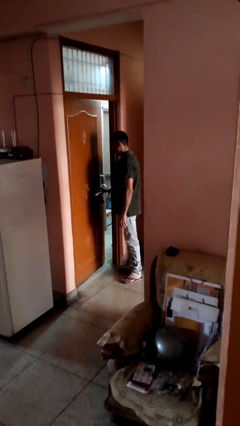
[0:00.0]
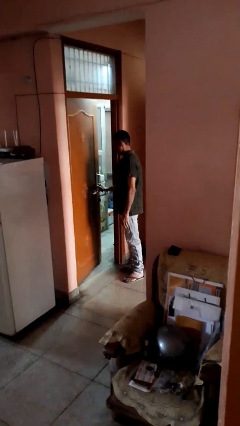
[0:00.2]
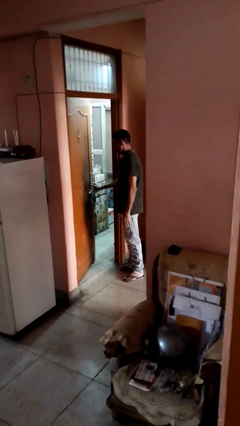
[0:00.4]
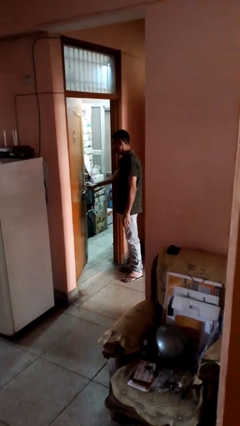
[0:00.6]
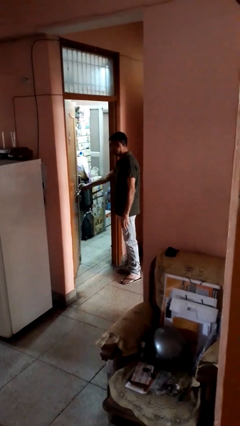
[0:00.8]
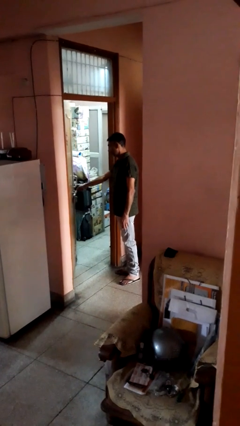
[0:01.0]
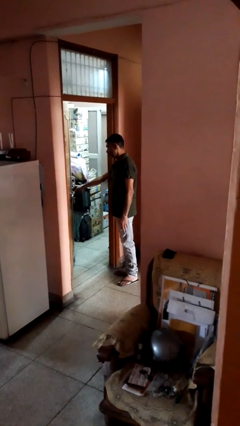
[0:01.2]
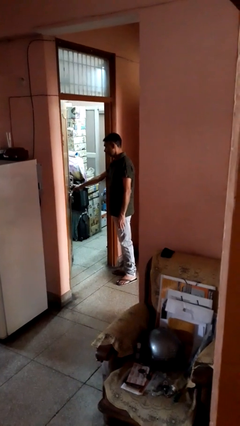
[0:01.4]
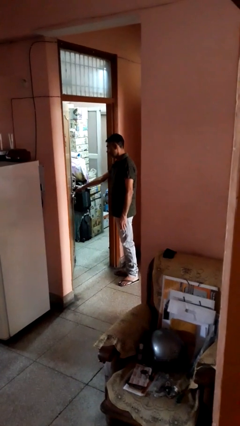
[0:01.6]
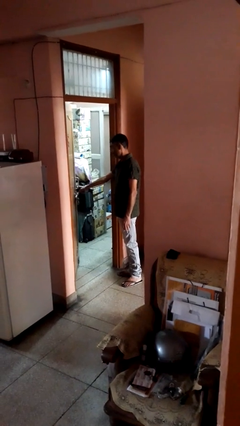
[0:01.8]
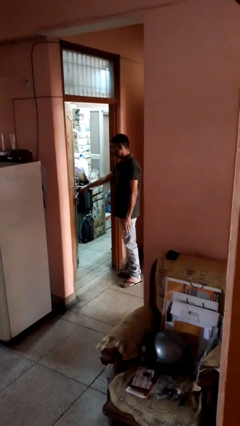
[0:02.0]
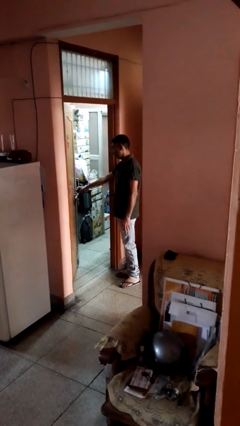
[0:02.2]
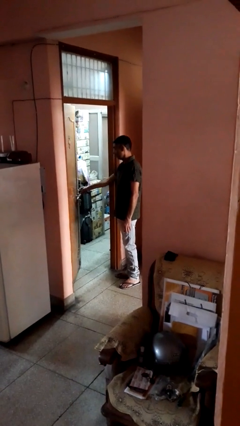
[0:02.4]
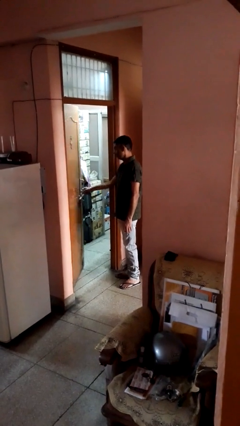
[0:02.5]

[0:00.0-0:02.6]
person opens facility door

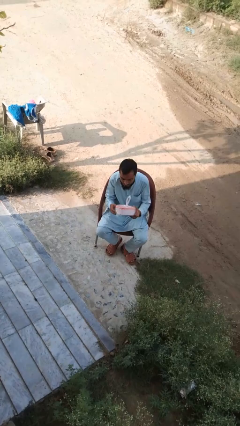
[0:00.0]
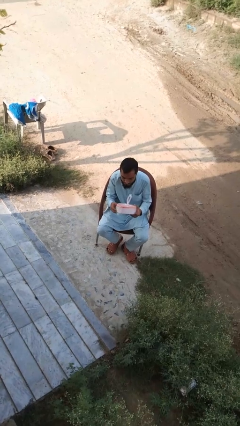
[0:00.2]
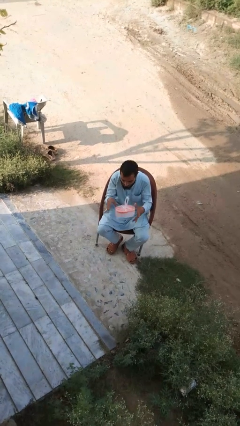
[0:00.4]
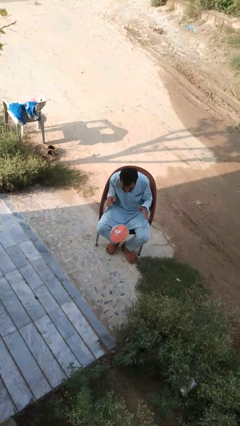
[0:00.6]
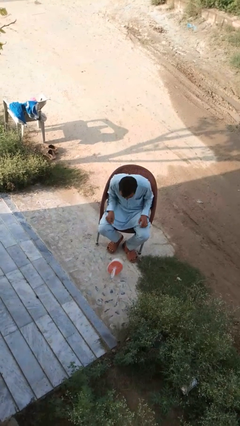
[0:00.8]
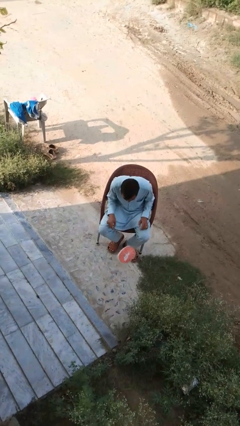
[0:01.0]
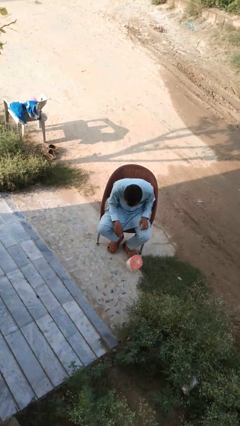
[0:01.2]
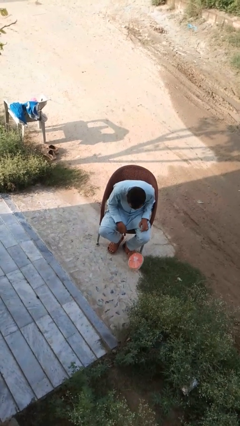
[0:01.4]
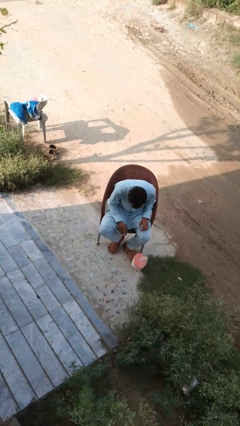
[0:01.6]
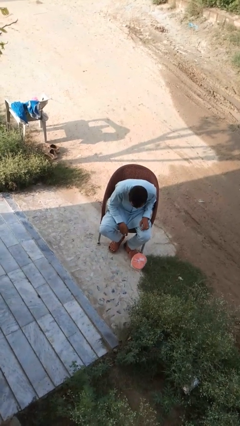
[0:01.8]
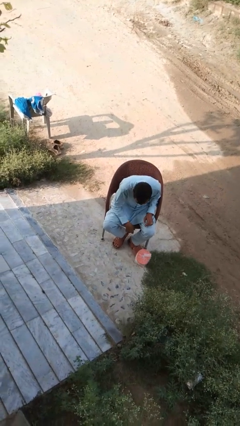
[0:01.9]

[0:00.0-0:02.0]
person drops object

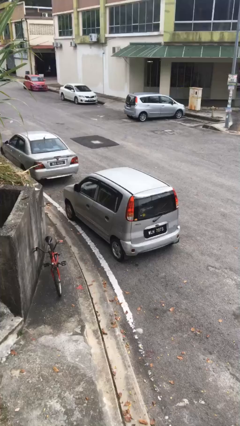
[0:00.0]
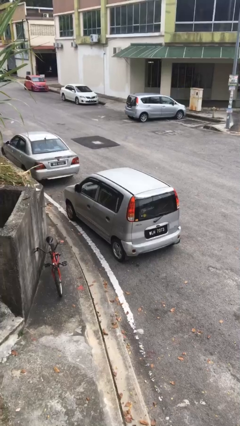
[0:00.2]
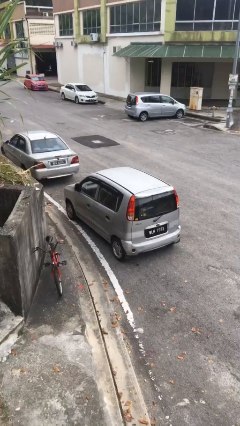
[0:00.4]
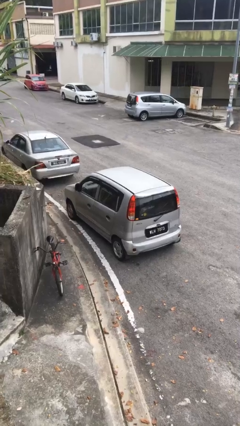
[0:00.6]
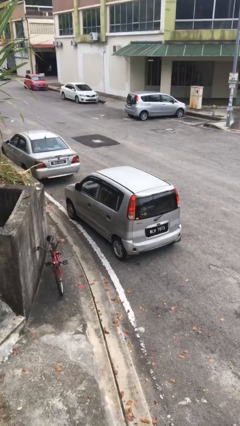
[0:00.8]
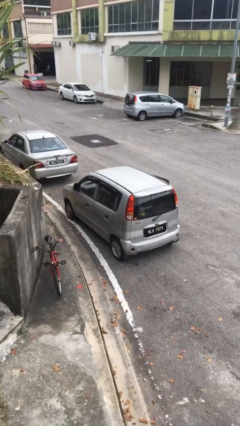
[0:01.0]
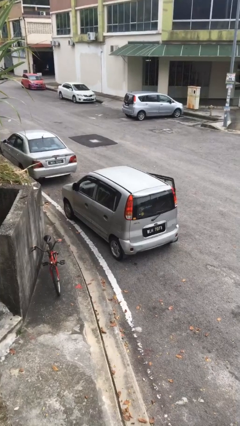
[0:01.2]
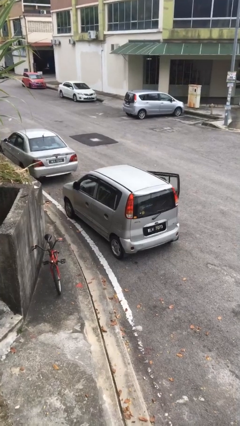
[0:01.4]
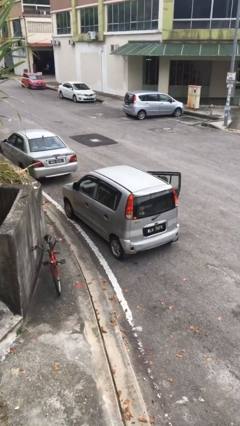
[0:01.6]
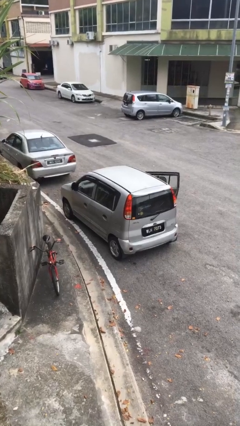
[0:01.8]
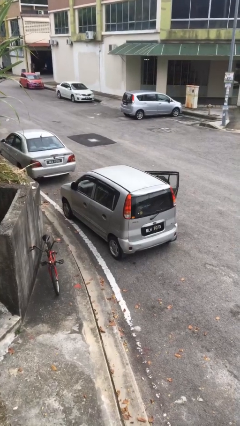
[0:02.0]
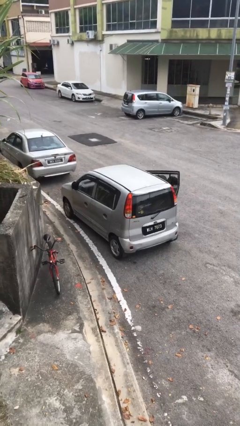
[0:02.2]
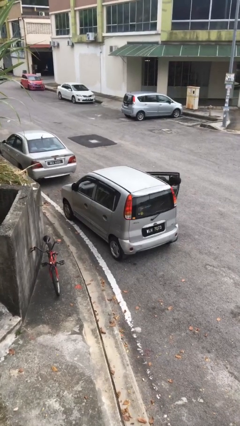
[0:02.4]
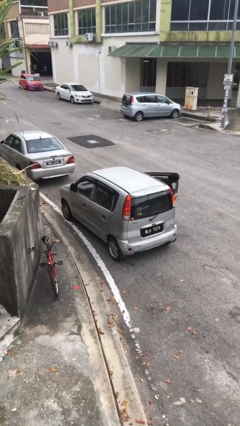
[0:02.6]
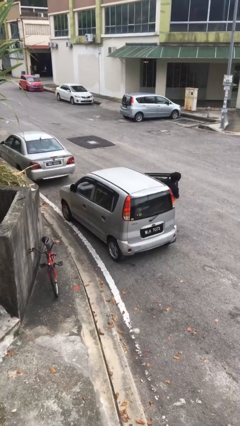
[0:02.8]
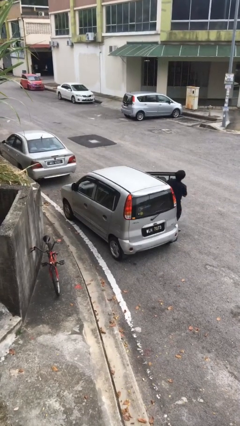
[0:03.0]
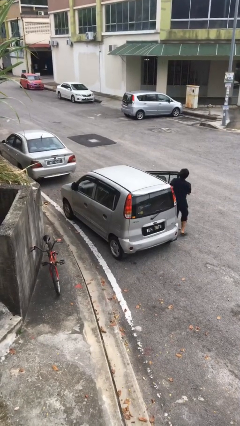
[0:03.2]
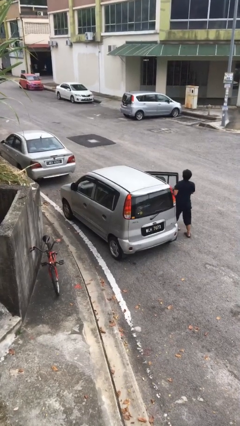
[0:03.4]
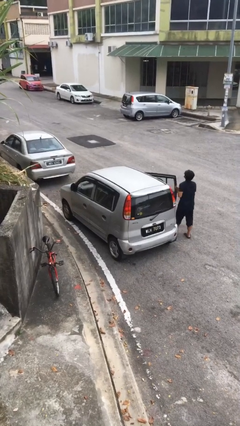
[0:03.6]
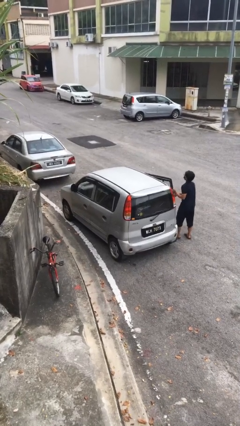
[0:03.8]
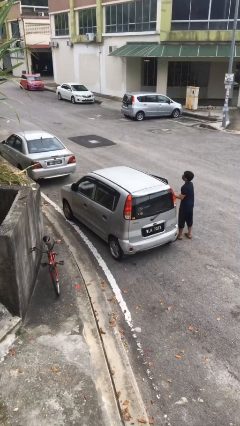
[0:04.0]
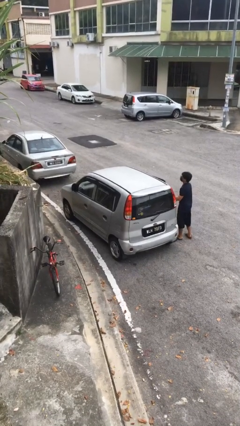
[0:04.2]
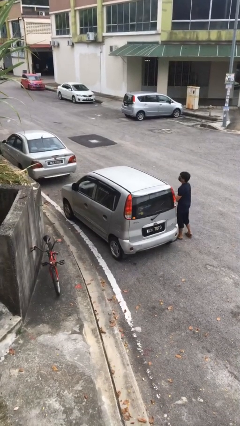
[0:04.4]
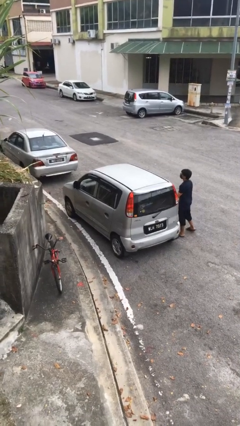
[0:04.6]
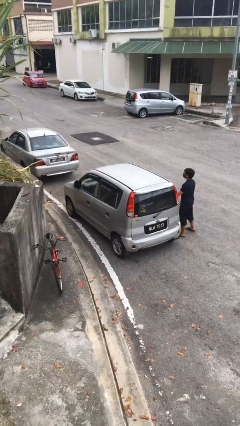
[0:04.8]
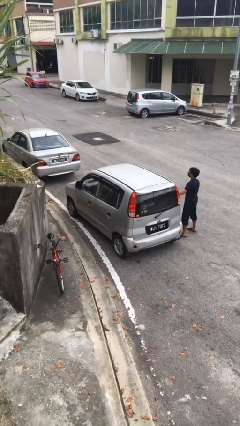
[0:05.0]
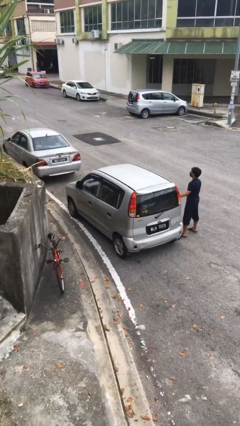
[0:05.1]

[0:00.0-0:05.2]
car drops off person

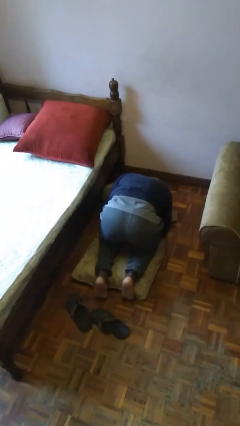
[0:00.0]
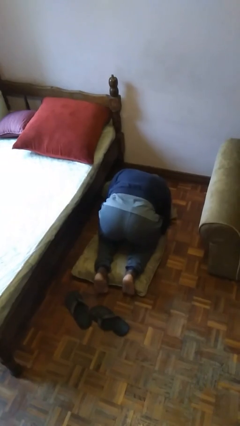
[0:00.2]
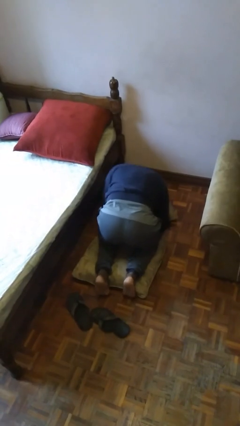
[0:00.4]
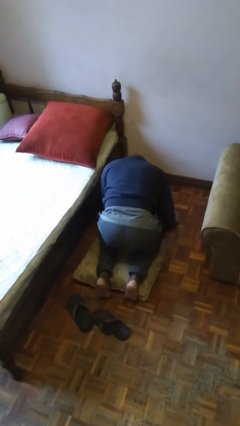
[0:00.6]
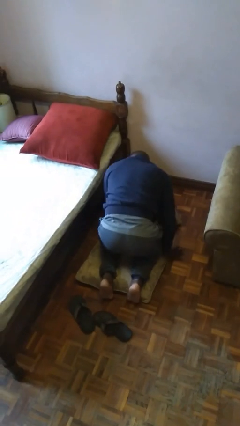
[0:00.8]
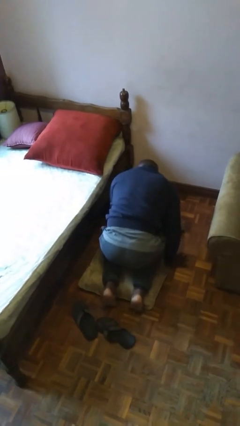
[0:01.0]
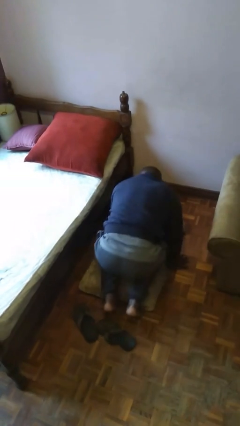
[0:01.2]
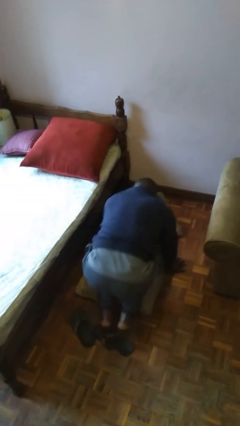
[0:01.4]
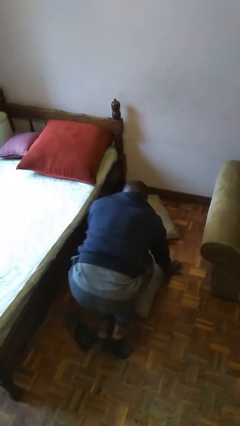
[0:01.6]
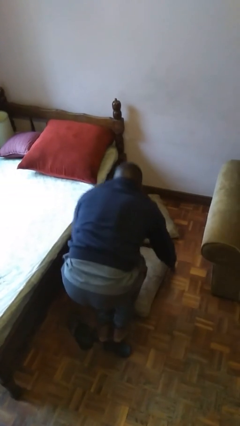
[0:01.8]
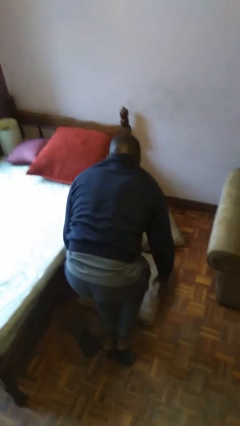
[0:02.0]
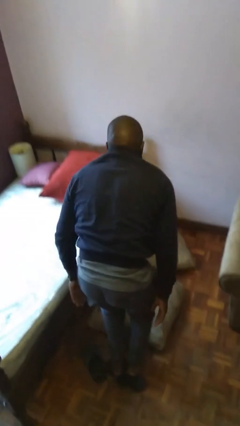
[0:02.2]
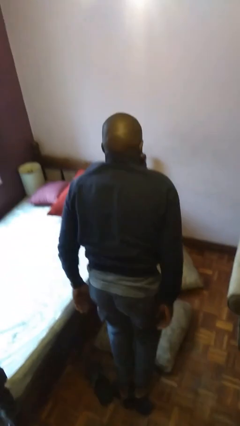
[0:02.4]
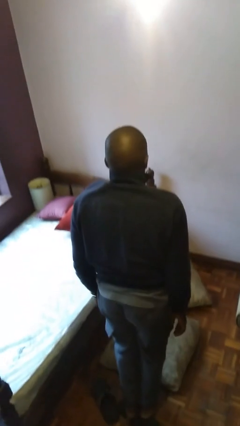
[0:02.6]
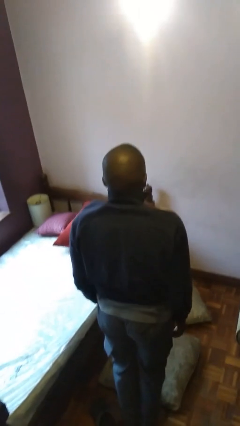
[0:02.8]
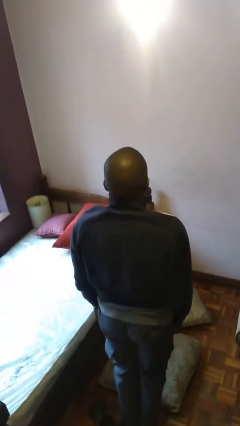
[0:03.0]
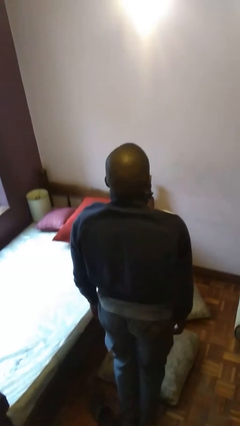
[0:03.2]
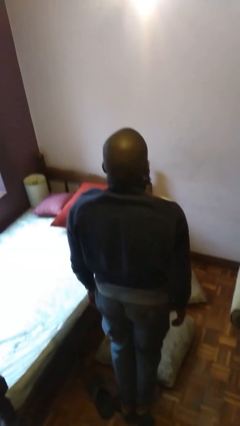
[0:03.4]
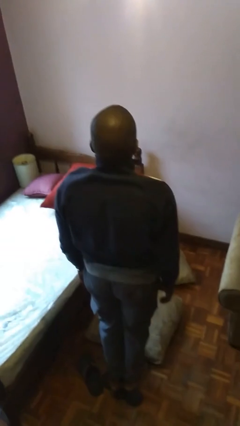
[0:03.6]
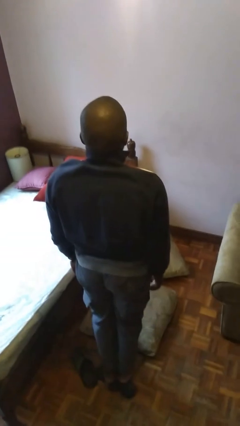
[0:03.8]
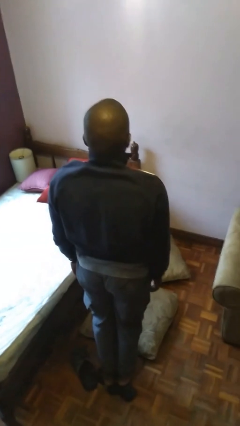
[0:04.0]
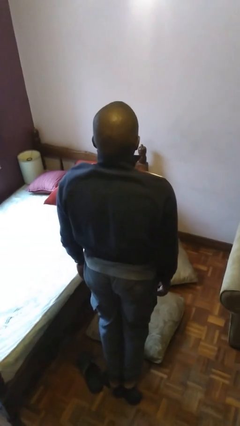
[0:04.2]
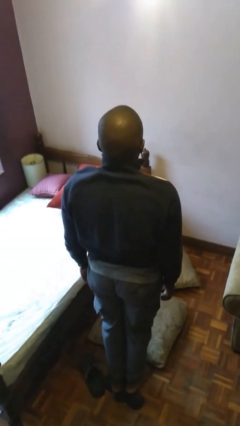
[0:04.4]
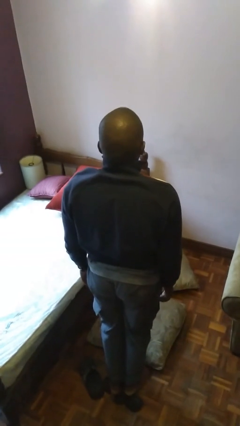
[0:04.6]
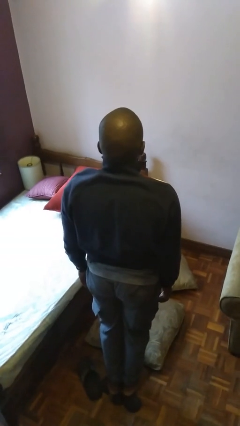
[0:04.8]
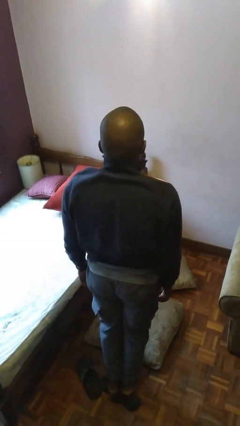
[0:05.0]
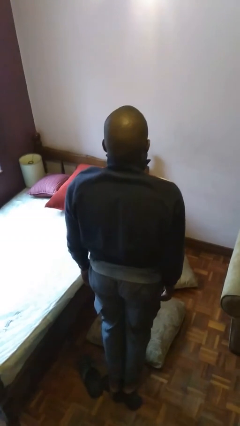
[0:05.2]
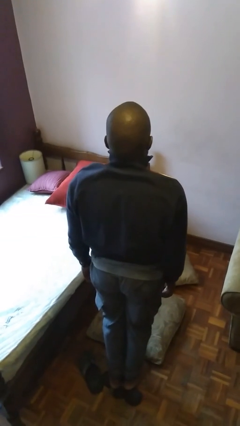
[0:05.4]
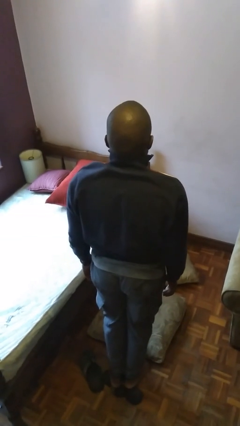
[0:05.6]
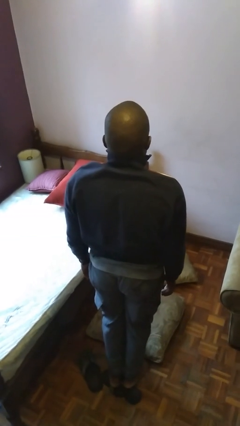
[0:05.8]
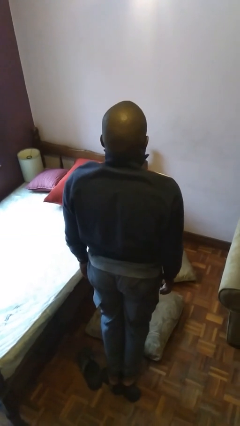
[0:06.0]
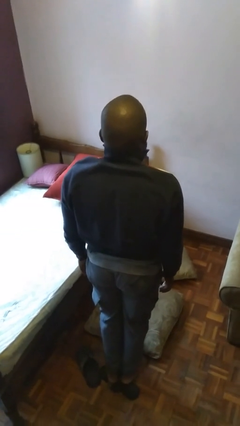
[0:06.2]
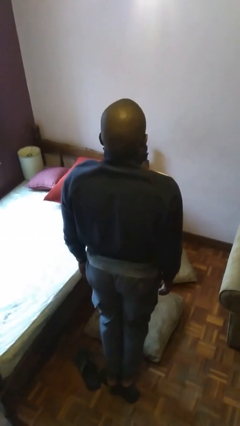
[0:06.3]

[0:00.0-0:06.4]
person stands up from floor

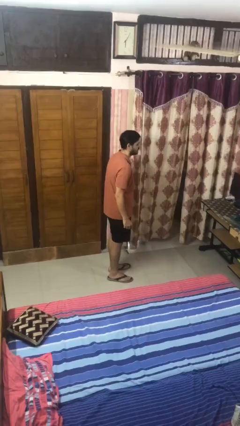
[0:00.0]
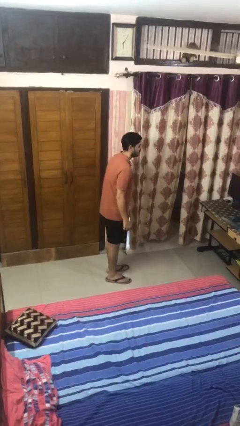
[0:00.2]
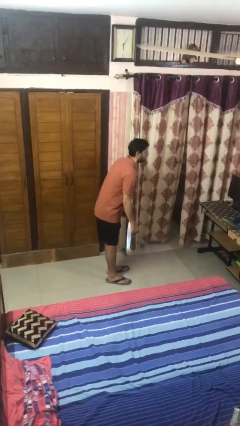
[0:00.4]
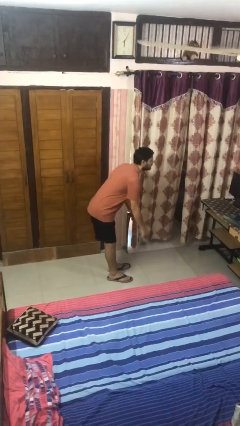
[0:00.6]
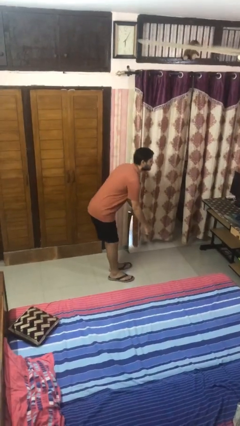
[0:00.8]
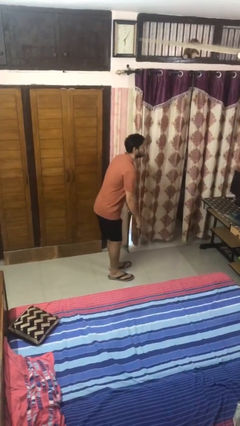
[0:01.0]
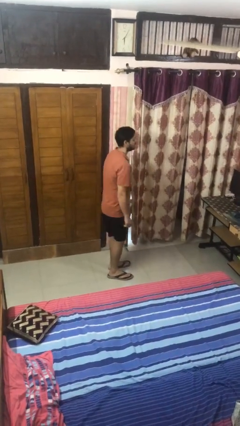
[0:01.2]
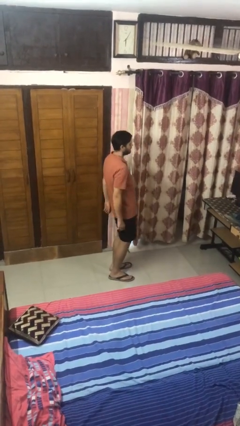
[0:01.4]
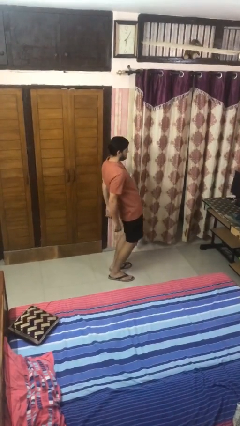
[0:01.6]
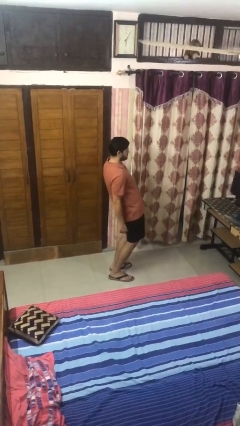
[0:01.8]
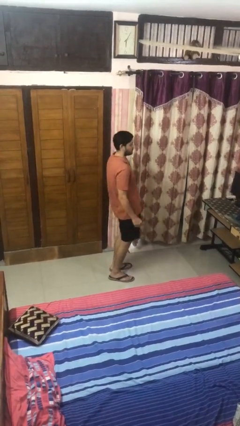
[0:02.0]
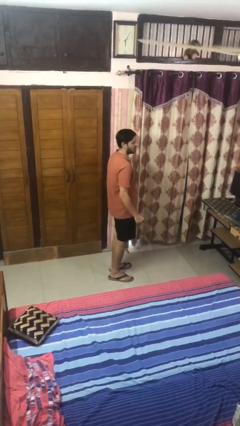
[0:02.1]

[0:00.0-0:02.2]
person wiggles hips
